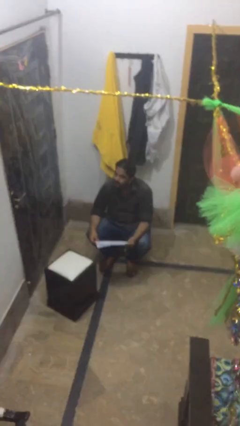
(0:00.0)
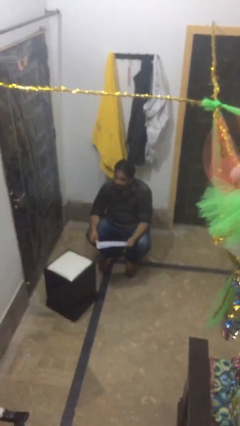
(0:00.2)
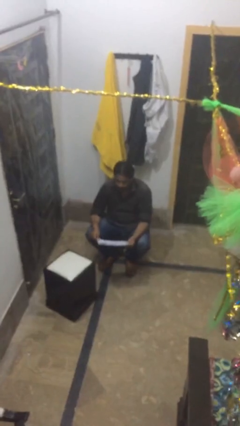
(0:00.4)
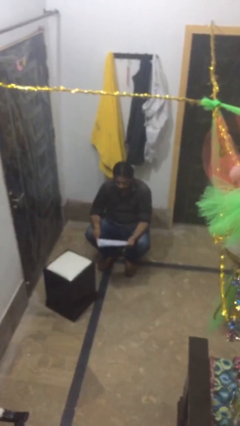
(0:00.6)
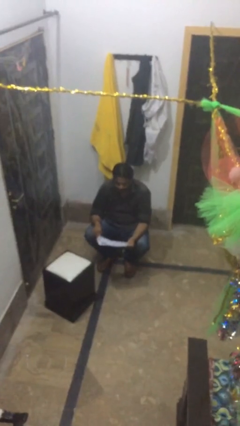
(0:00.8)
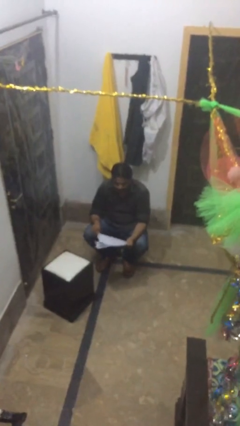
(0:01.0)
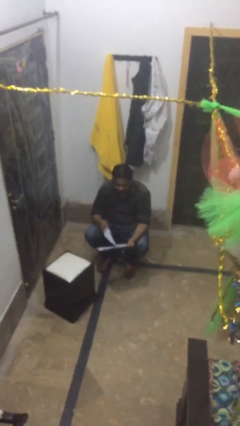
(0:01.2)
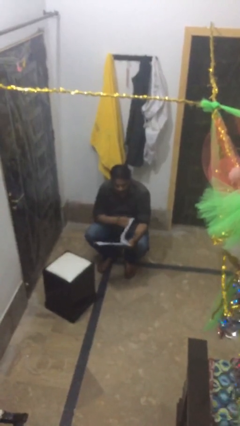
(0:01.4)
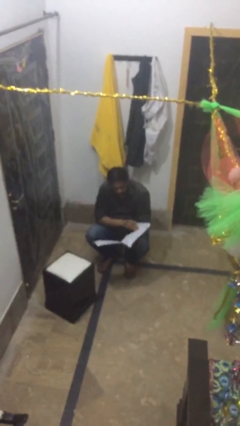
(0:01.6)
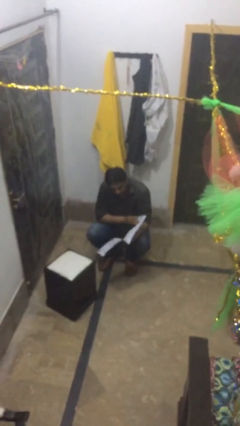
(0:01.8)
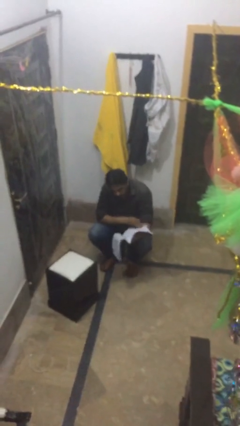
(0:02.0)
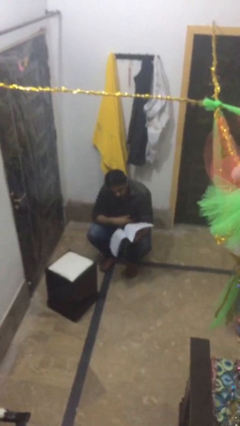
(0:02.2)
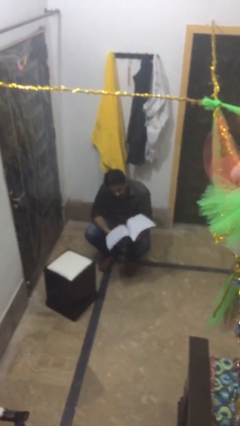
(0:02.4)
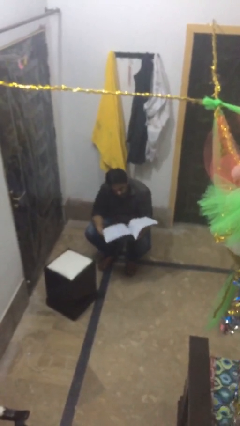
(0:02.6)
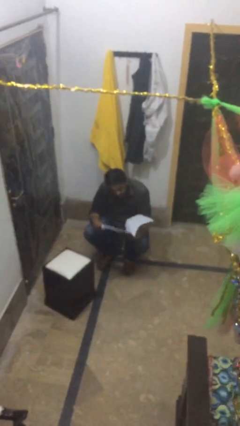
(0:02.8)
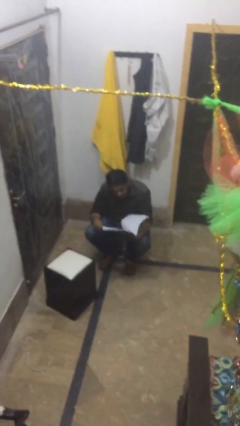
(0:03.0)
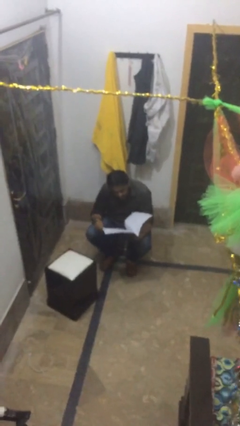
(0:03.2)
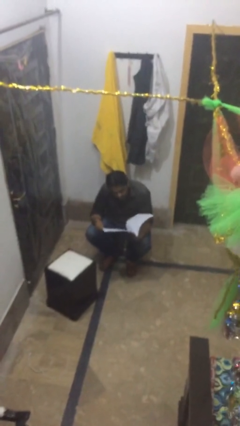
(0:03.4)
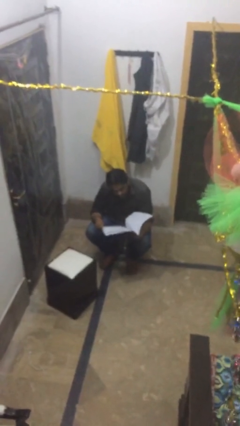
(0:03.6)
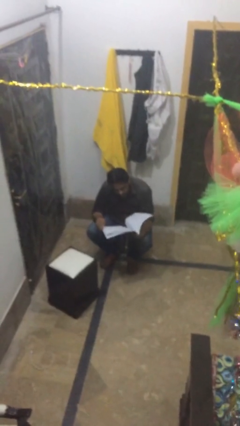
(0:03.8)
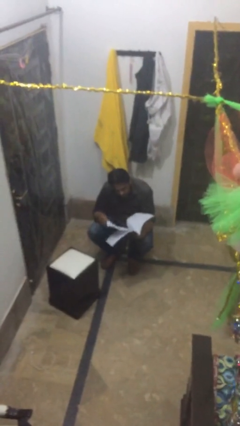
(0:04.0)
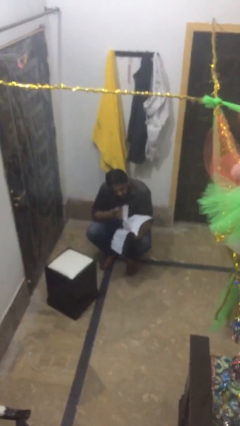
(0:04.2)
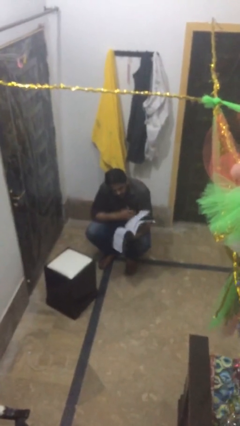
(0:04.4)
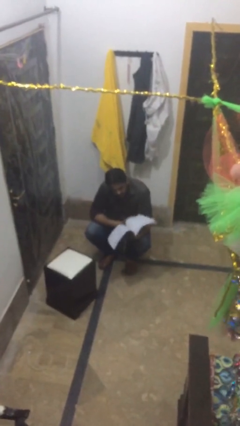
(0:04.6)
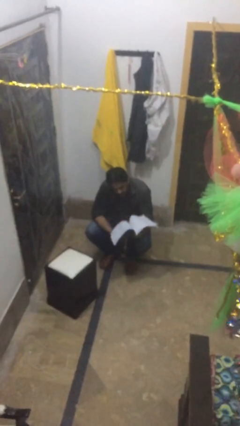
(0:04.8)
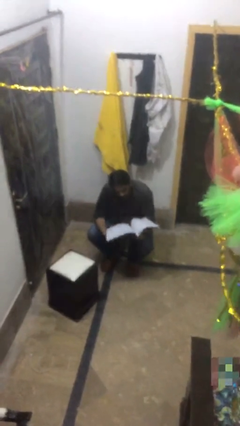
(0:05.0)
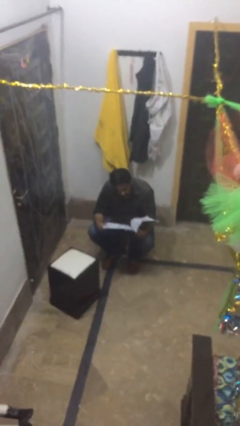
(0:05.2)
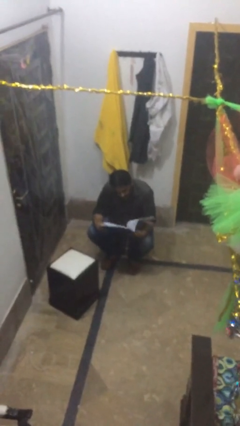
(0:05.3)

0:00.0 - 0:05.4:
person reads document

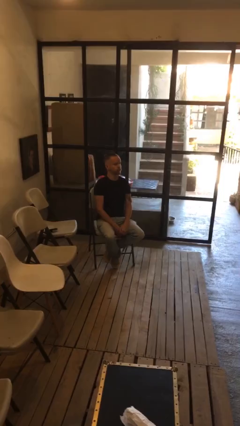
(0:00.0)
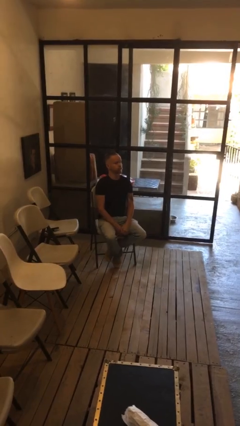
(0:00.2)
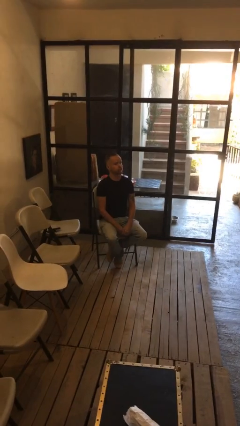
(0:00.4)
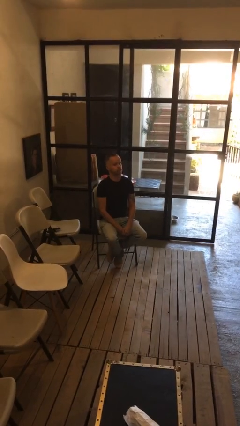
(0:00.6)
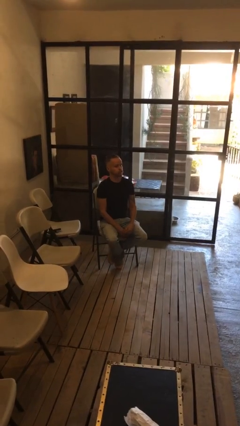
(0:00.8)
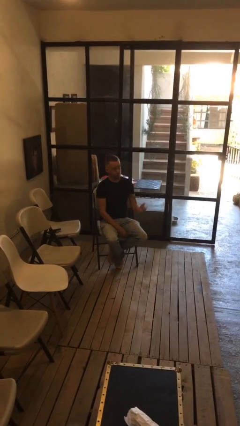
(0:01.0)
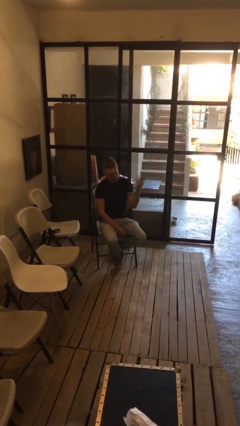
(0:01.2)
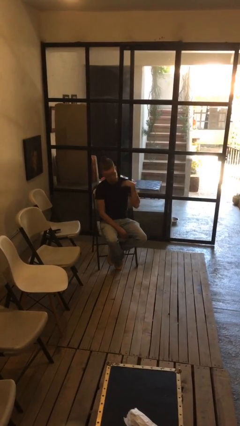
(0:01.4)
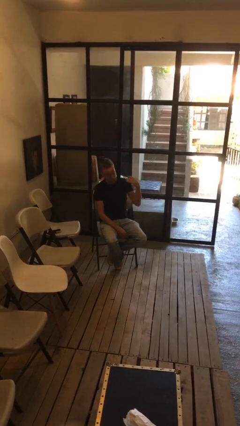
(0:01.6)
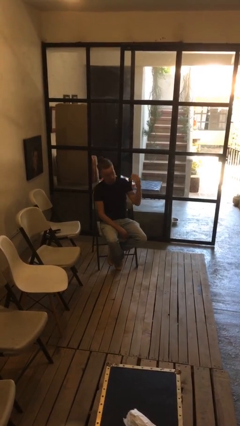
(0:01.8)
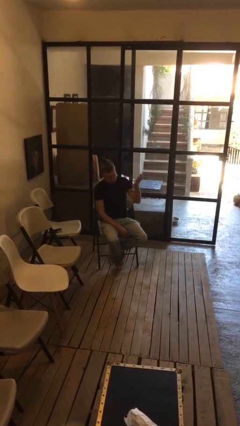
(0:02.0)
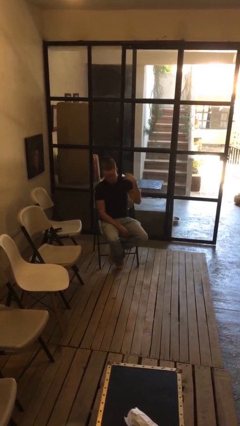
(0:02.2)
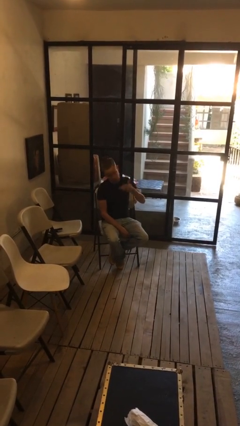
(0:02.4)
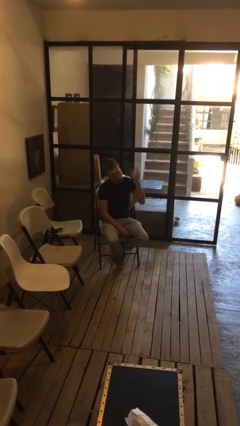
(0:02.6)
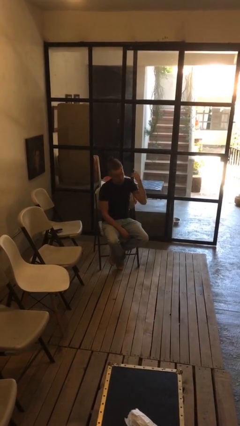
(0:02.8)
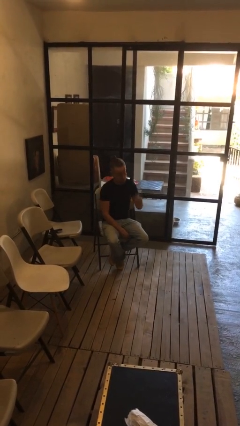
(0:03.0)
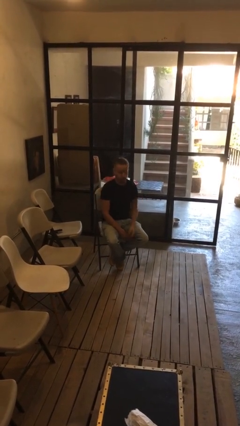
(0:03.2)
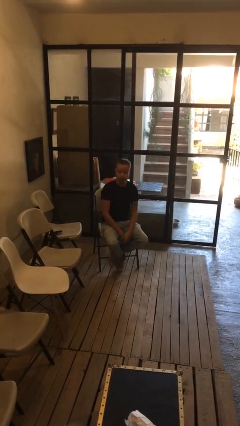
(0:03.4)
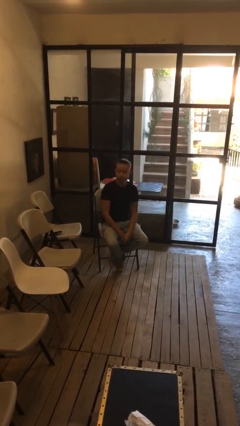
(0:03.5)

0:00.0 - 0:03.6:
person gestures come here

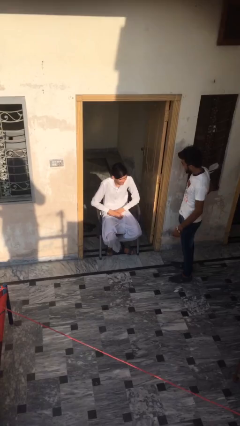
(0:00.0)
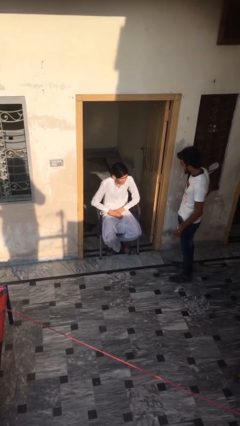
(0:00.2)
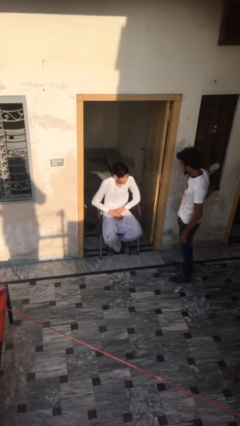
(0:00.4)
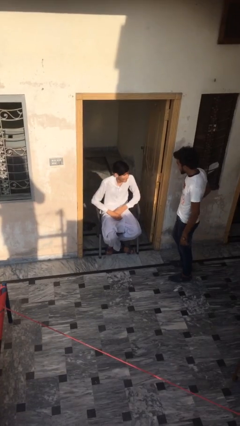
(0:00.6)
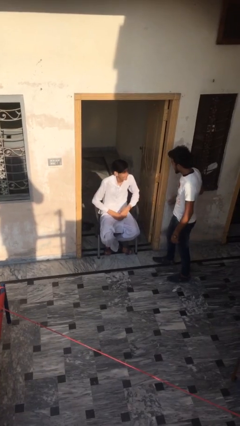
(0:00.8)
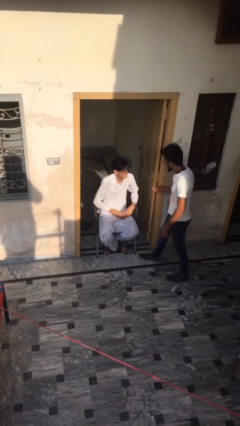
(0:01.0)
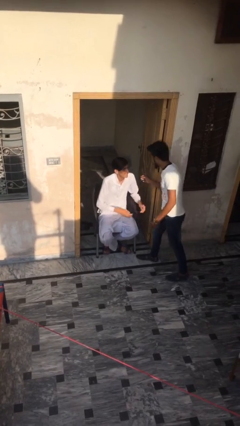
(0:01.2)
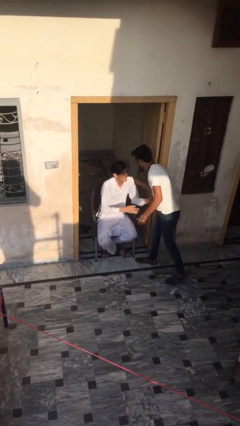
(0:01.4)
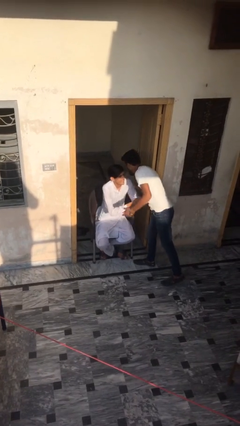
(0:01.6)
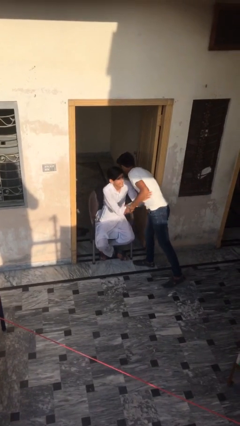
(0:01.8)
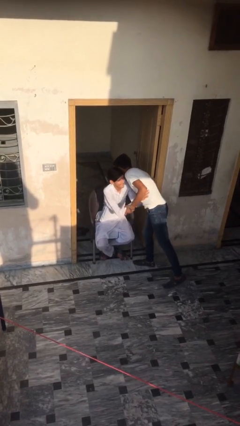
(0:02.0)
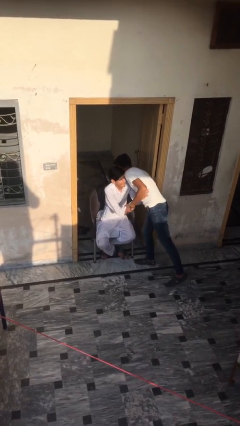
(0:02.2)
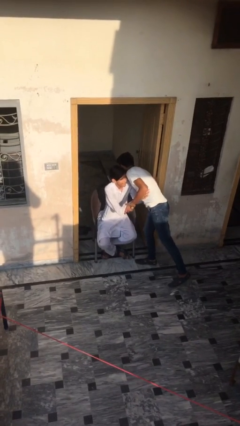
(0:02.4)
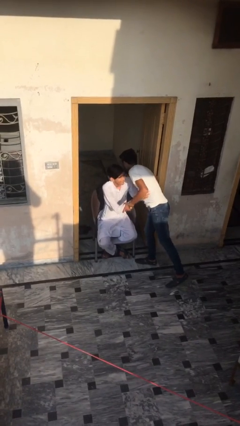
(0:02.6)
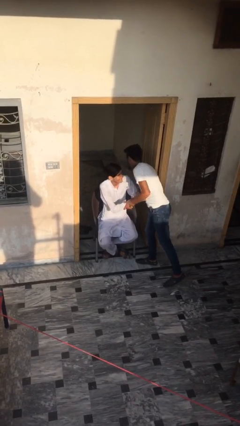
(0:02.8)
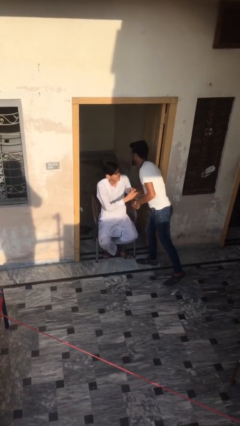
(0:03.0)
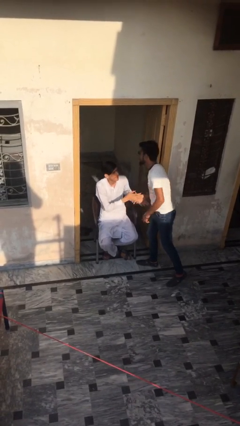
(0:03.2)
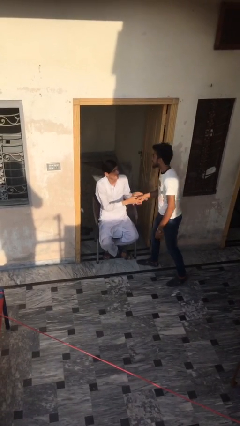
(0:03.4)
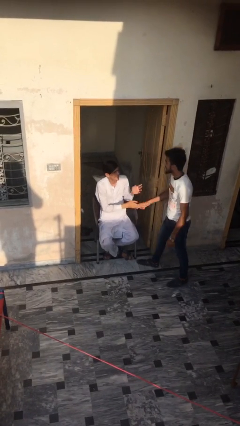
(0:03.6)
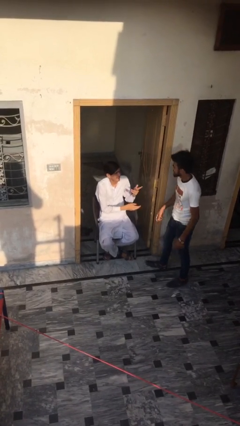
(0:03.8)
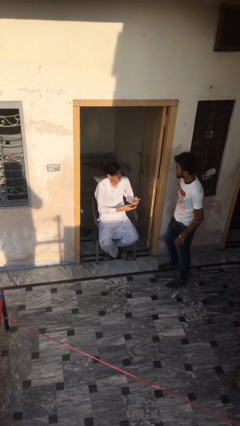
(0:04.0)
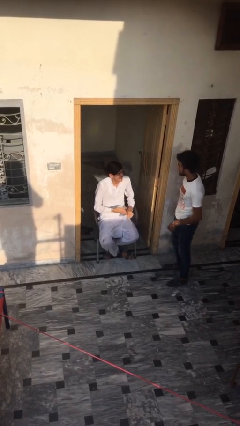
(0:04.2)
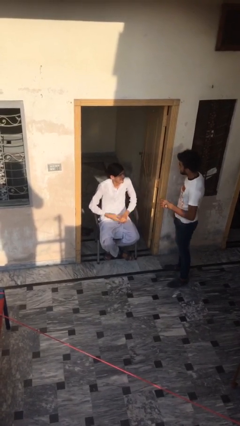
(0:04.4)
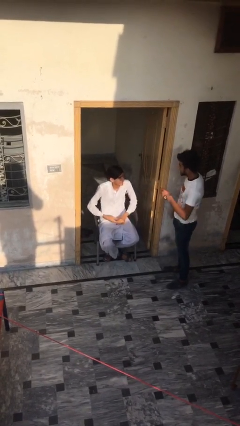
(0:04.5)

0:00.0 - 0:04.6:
person embraces person

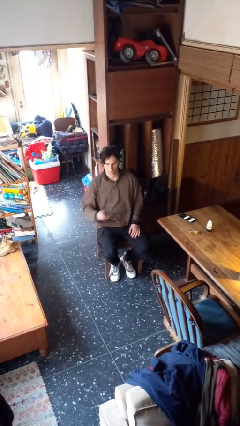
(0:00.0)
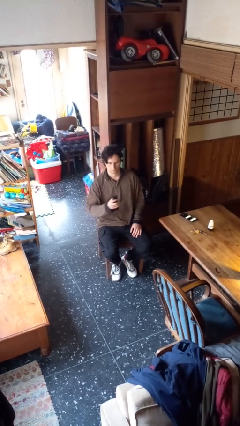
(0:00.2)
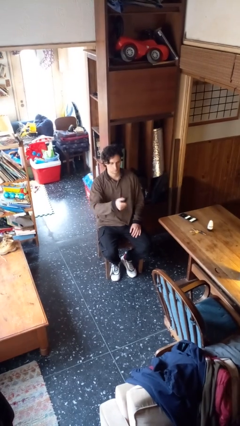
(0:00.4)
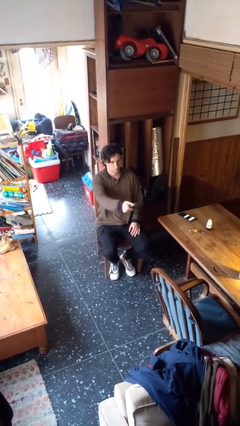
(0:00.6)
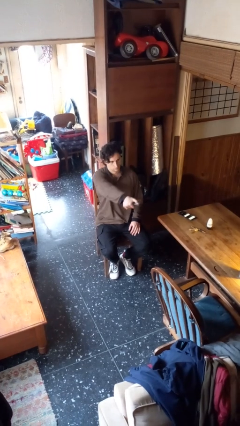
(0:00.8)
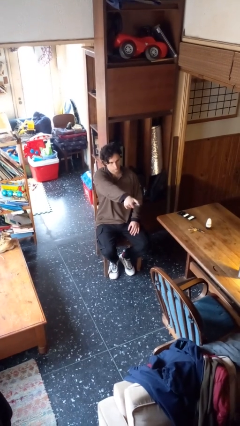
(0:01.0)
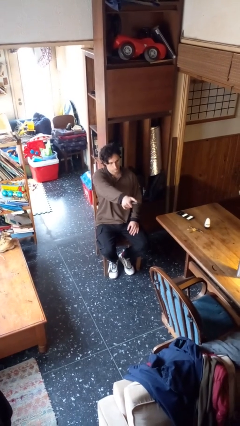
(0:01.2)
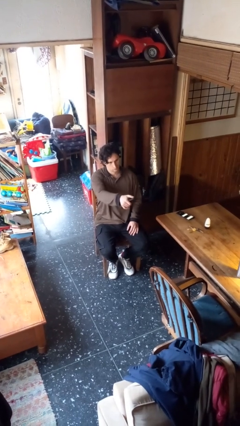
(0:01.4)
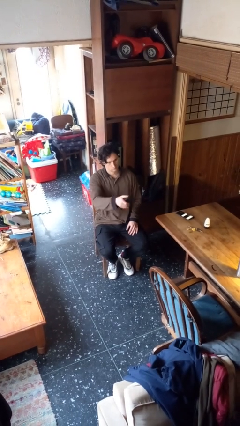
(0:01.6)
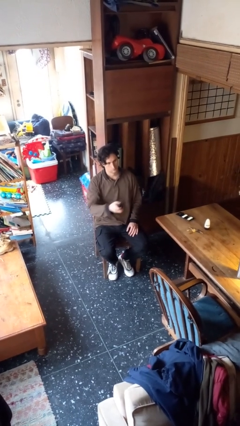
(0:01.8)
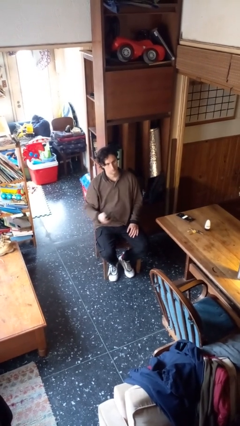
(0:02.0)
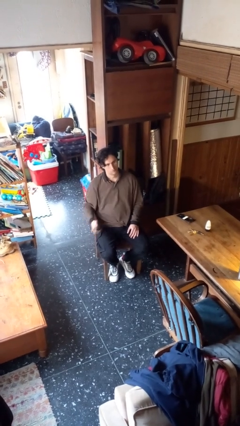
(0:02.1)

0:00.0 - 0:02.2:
person uses television remote

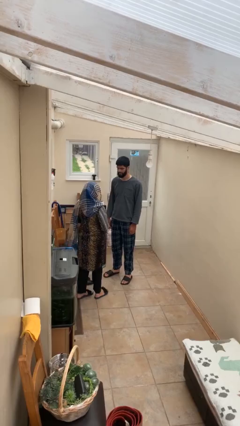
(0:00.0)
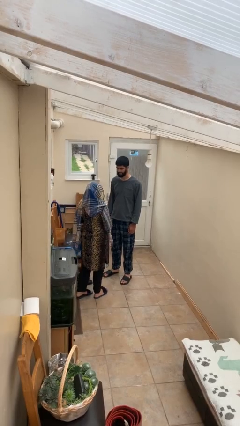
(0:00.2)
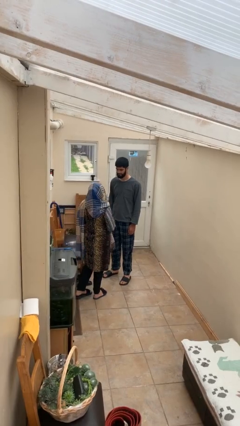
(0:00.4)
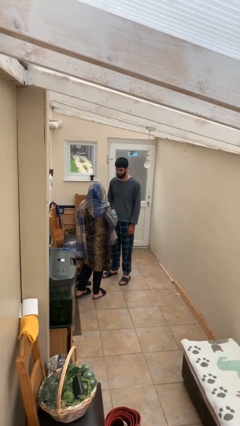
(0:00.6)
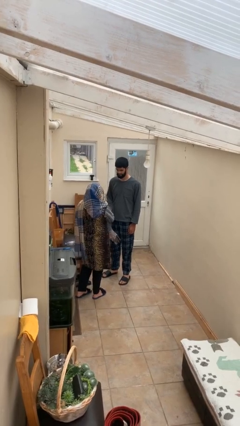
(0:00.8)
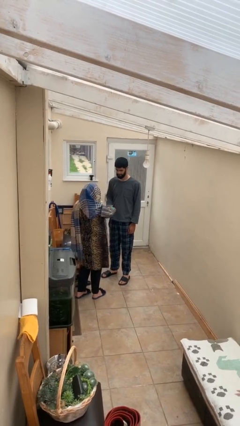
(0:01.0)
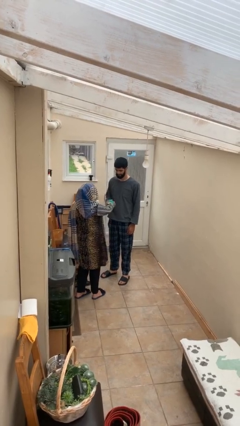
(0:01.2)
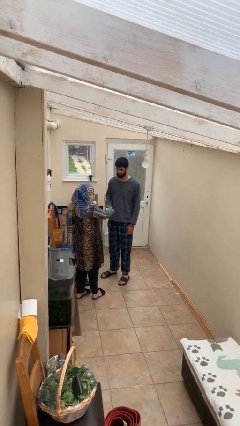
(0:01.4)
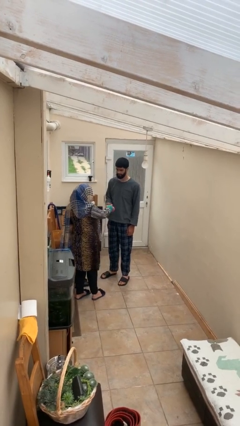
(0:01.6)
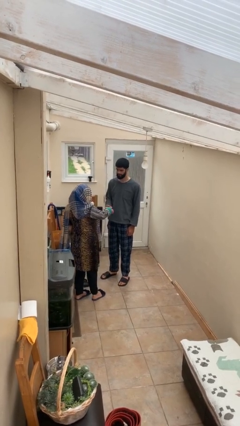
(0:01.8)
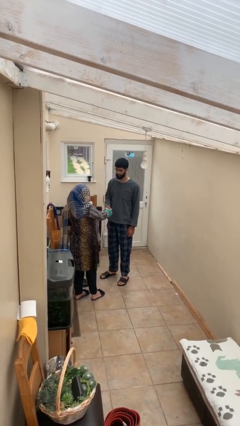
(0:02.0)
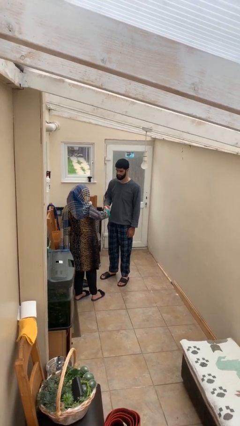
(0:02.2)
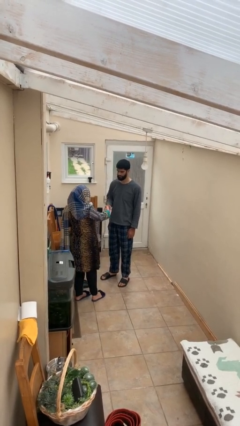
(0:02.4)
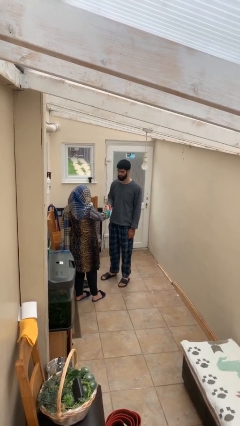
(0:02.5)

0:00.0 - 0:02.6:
person shakes hand
